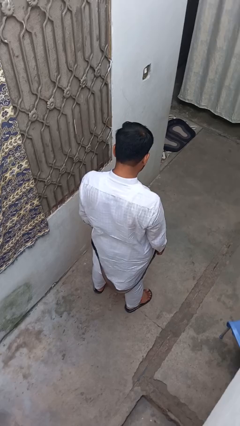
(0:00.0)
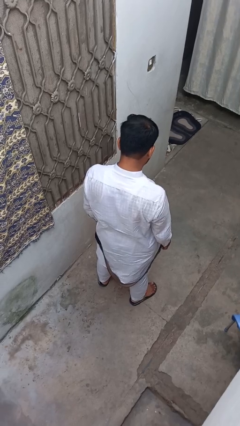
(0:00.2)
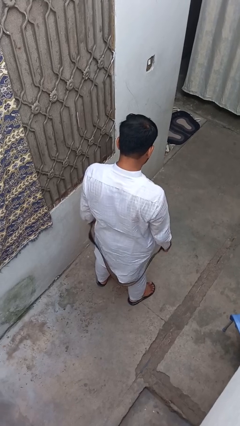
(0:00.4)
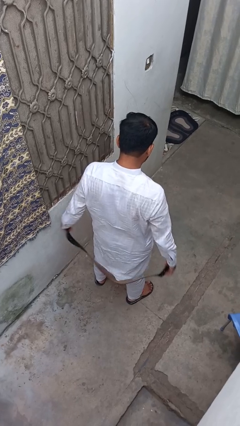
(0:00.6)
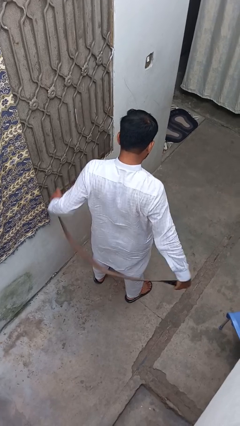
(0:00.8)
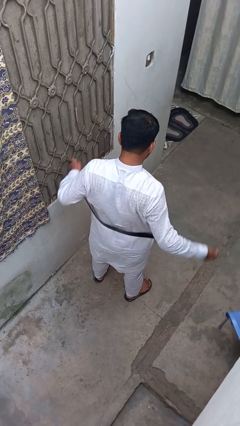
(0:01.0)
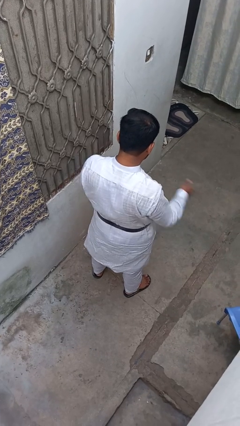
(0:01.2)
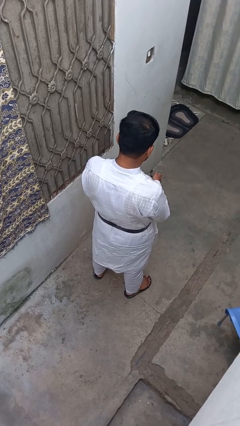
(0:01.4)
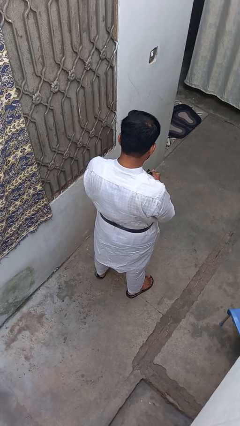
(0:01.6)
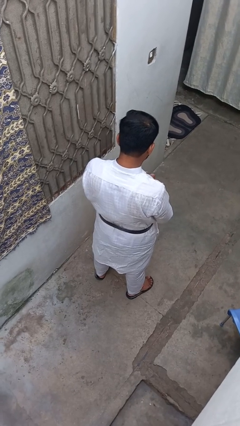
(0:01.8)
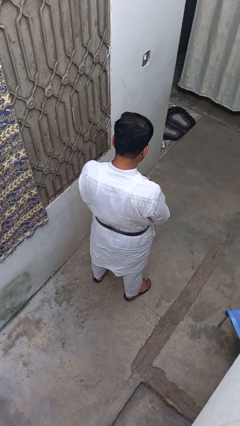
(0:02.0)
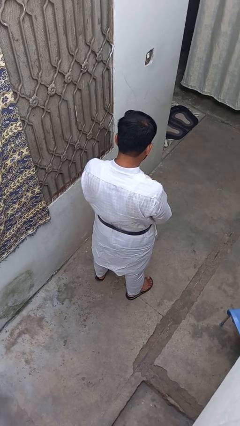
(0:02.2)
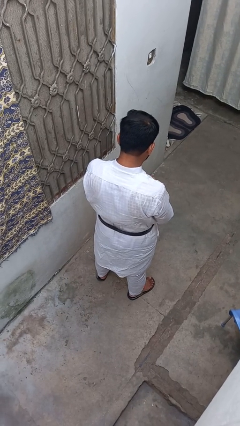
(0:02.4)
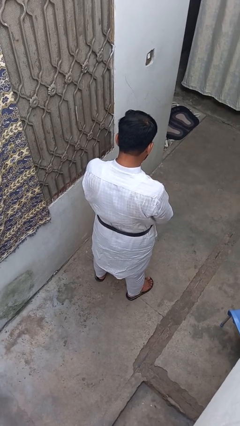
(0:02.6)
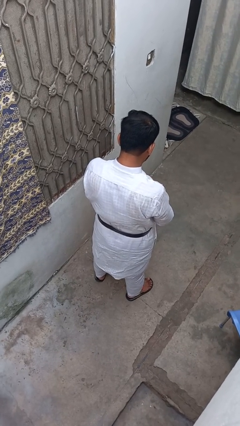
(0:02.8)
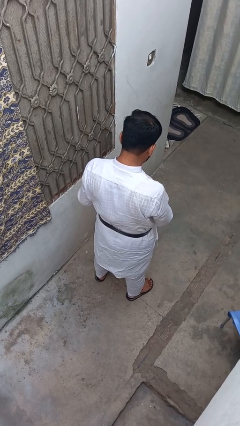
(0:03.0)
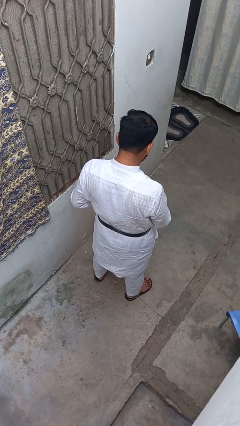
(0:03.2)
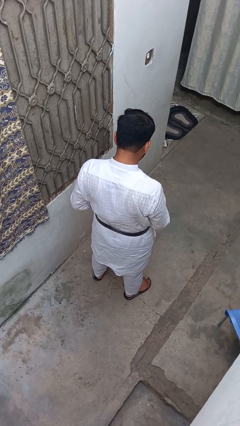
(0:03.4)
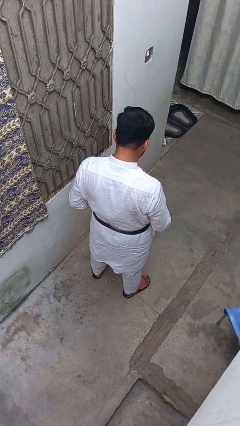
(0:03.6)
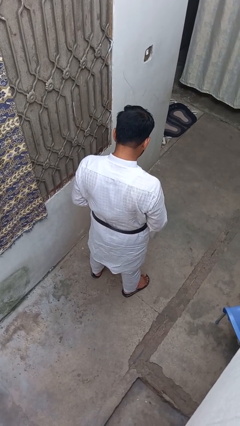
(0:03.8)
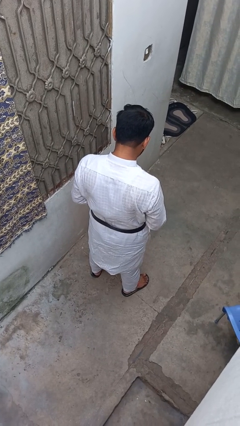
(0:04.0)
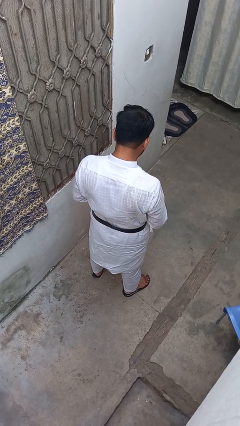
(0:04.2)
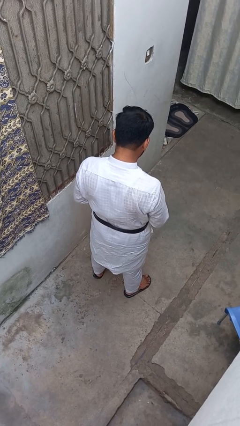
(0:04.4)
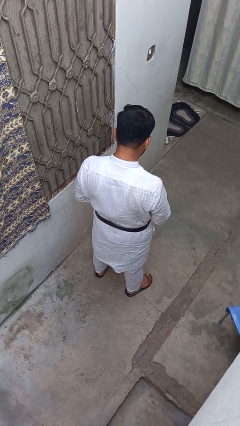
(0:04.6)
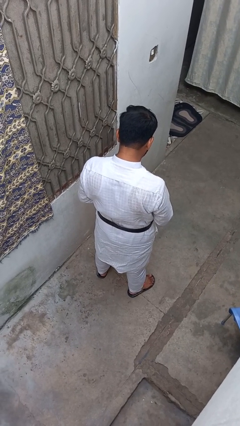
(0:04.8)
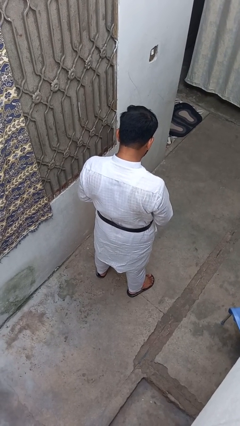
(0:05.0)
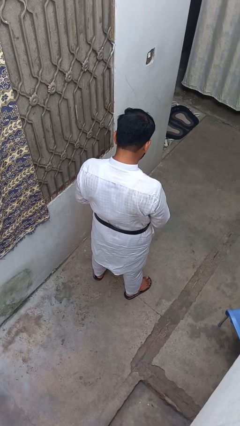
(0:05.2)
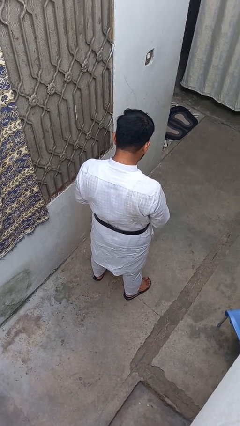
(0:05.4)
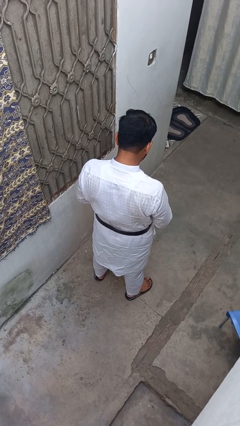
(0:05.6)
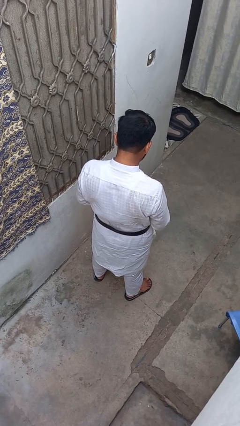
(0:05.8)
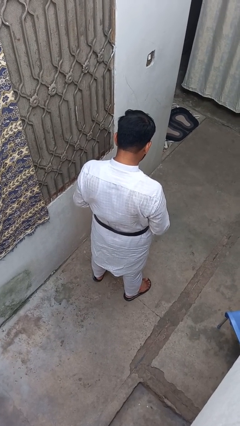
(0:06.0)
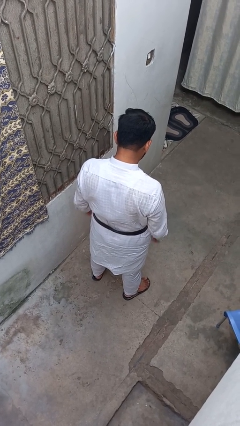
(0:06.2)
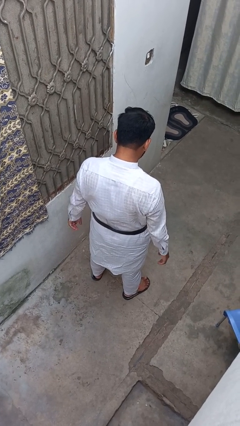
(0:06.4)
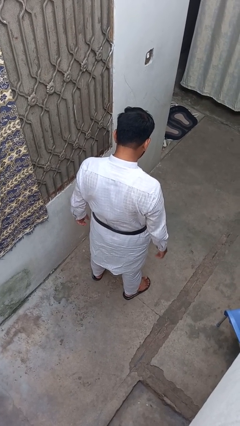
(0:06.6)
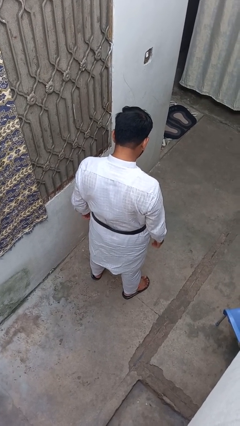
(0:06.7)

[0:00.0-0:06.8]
person puts on belt

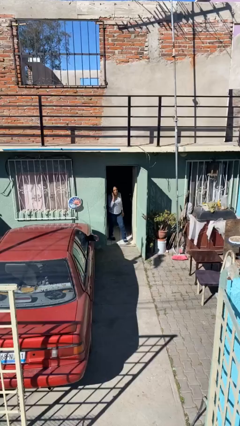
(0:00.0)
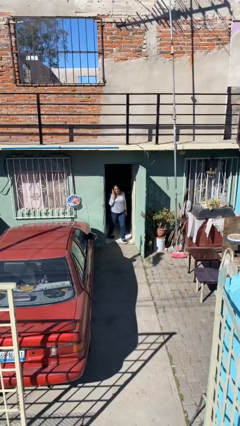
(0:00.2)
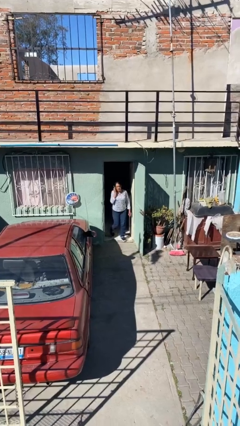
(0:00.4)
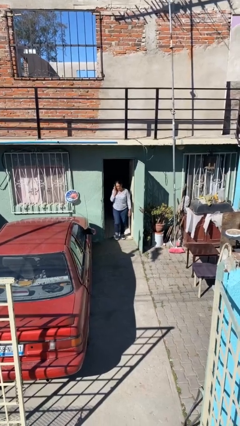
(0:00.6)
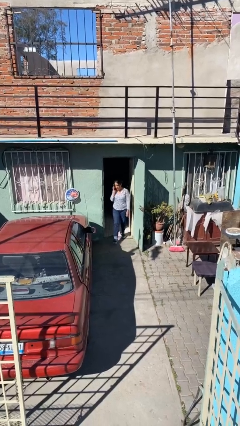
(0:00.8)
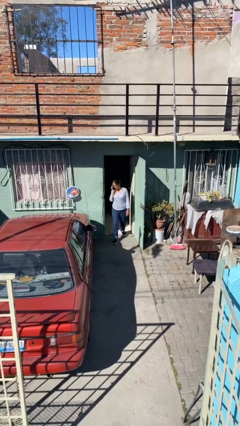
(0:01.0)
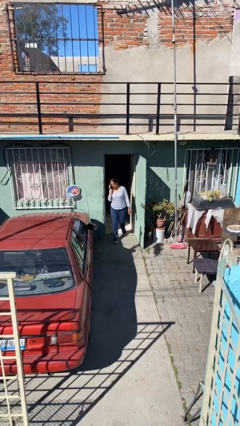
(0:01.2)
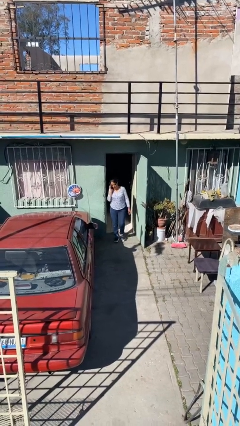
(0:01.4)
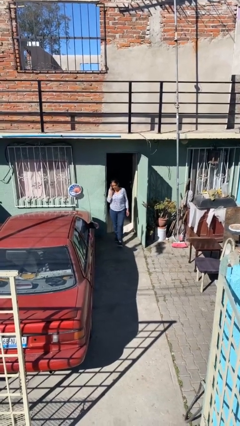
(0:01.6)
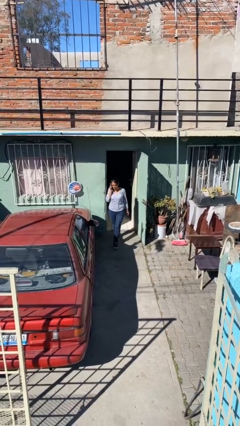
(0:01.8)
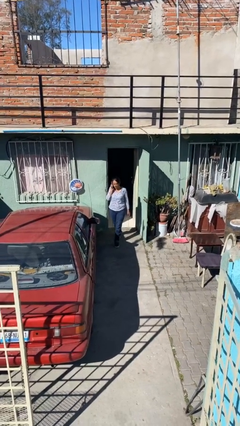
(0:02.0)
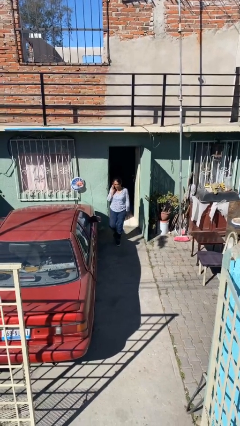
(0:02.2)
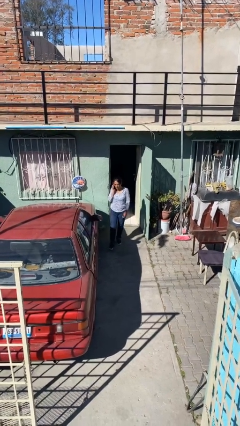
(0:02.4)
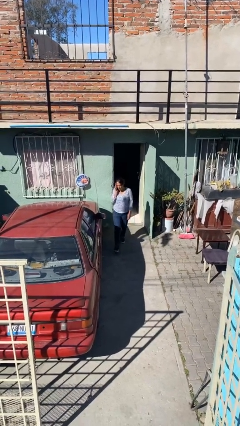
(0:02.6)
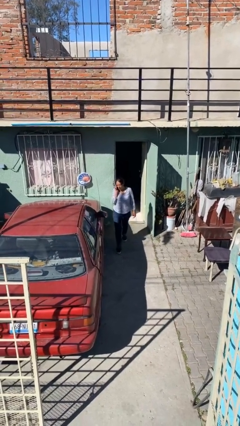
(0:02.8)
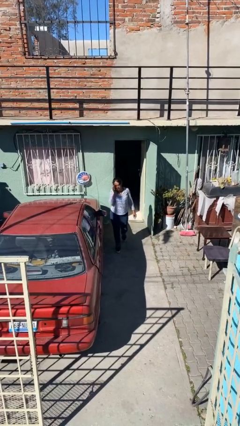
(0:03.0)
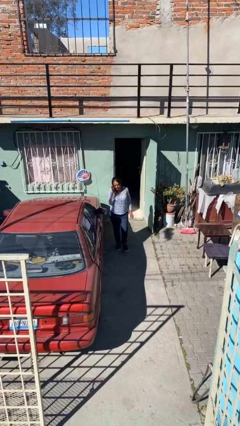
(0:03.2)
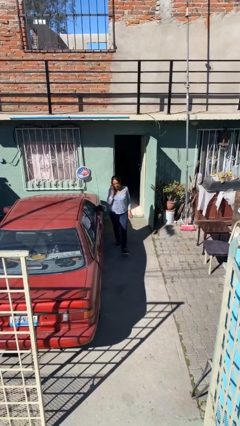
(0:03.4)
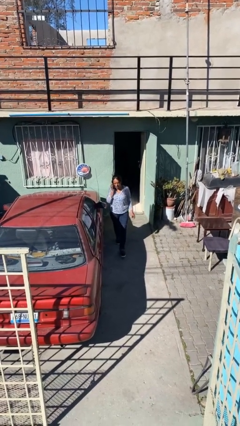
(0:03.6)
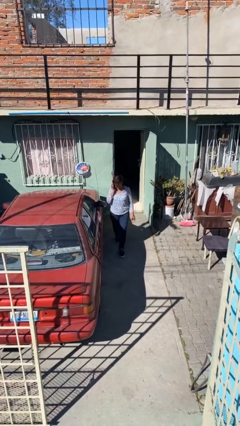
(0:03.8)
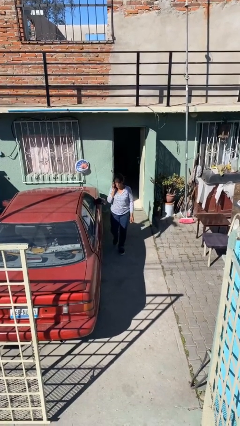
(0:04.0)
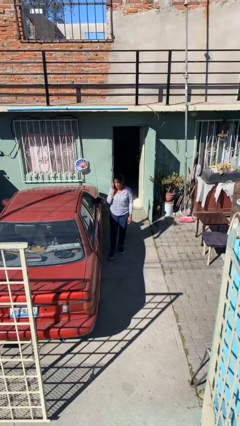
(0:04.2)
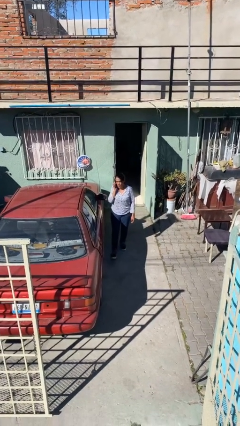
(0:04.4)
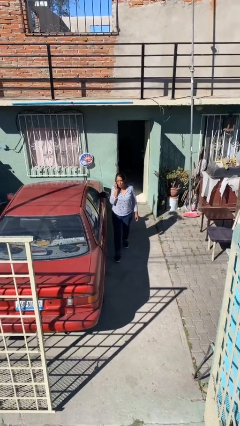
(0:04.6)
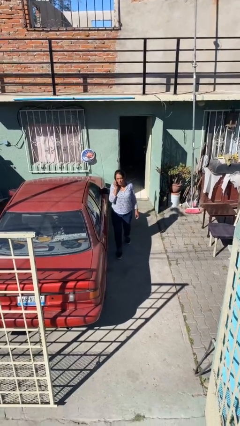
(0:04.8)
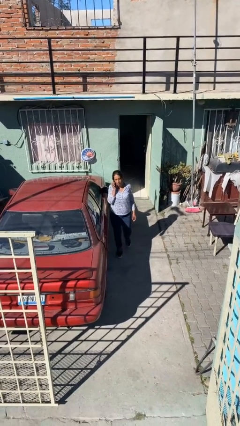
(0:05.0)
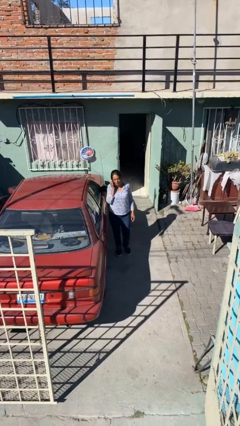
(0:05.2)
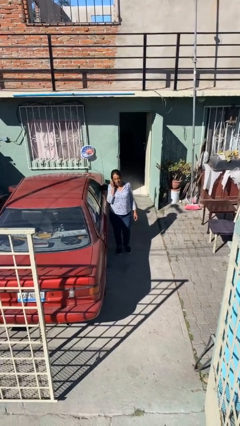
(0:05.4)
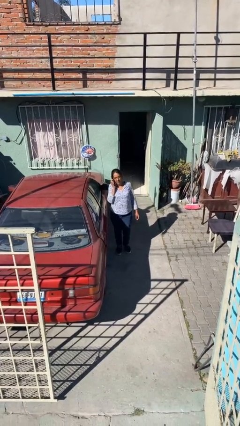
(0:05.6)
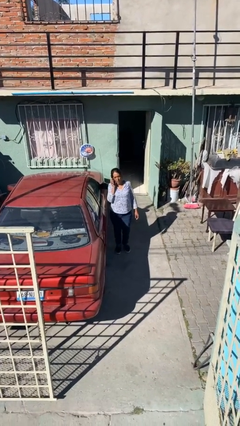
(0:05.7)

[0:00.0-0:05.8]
person enters scene through structure

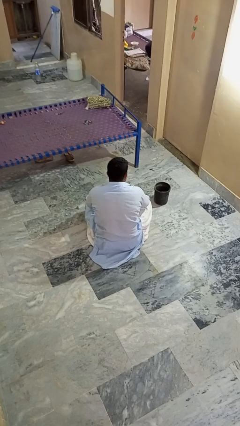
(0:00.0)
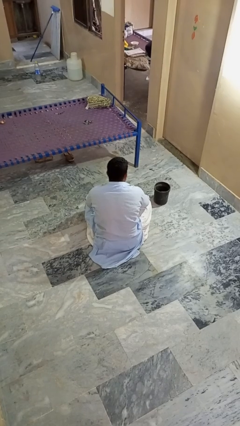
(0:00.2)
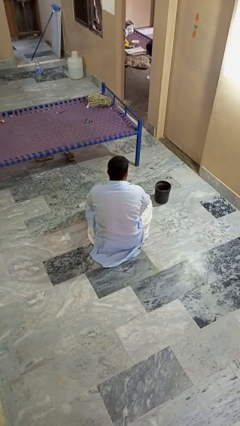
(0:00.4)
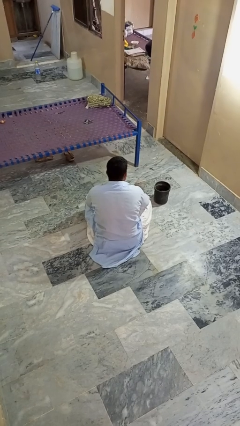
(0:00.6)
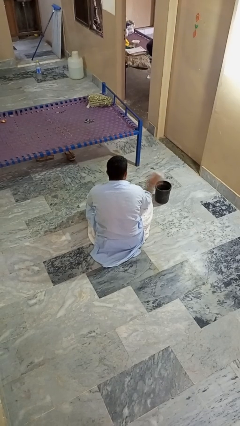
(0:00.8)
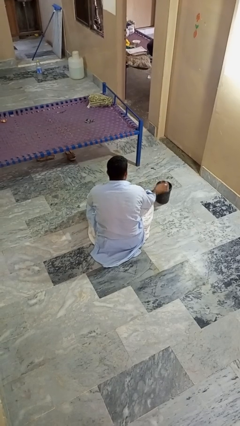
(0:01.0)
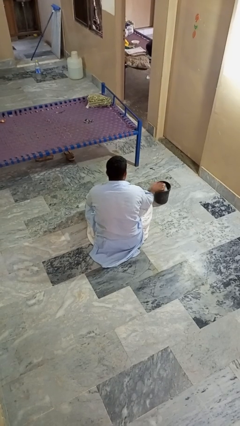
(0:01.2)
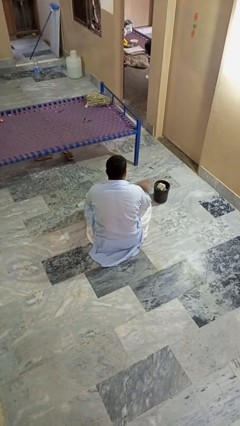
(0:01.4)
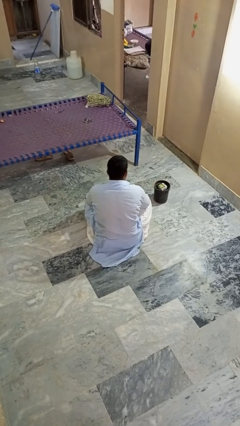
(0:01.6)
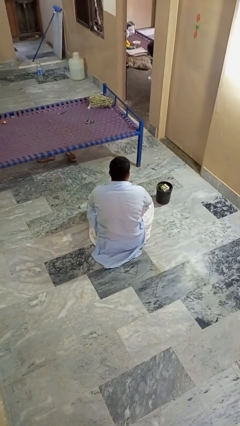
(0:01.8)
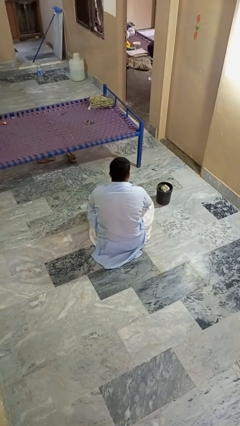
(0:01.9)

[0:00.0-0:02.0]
person puts object into basket

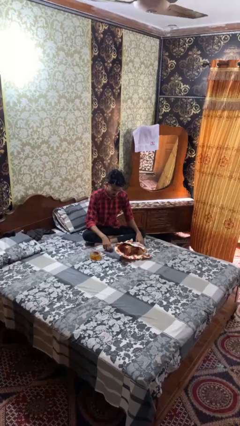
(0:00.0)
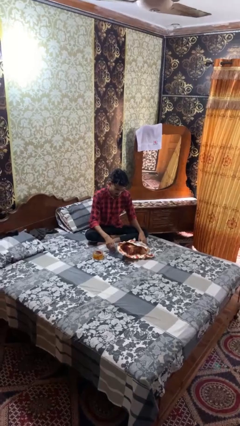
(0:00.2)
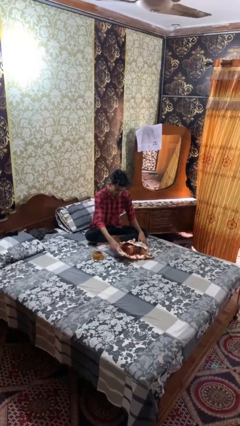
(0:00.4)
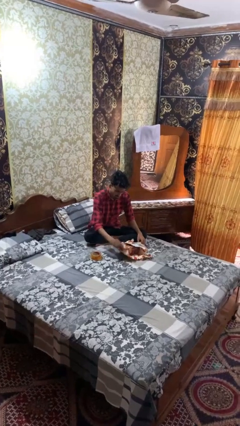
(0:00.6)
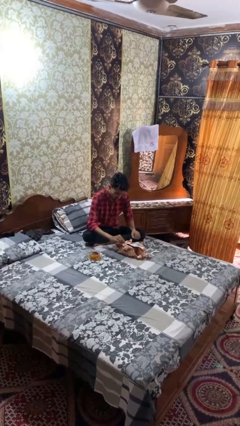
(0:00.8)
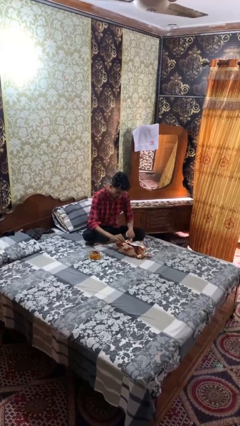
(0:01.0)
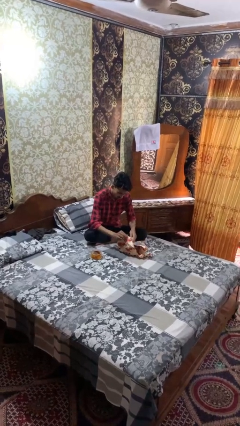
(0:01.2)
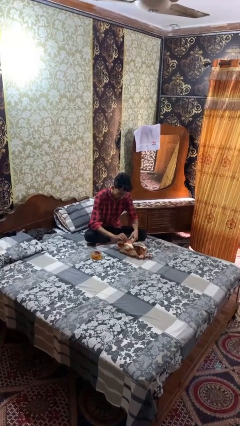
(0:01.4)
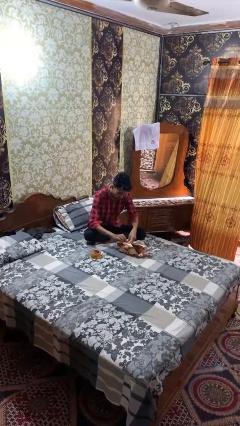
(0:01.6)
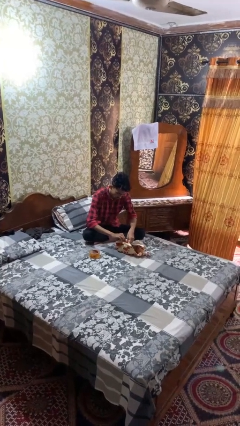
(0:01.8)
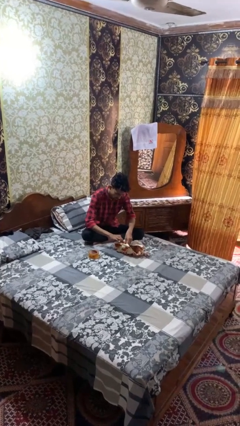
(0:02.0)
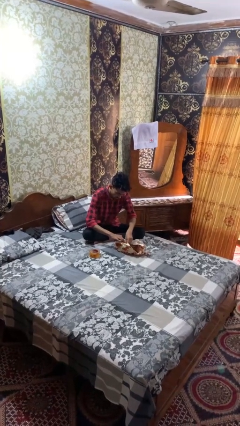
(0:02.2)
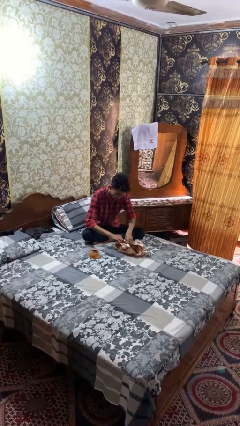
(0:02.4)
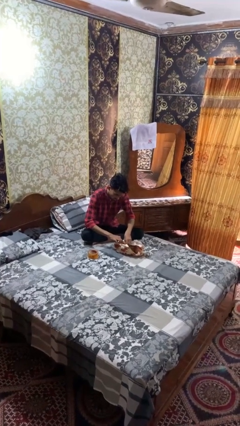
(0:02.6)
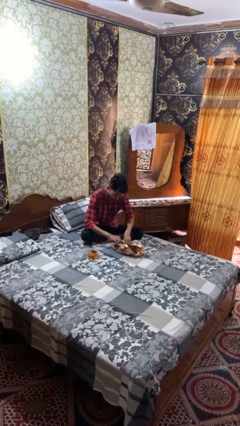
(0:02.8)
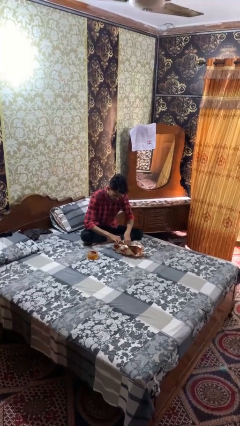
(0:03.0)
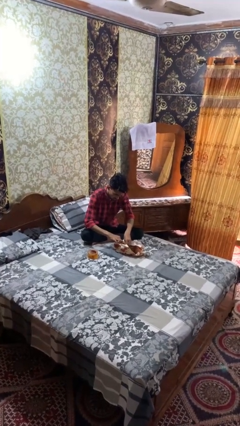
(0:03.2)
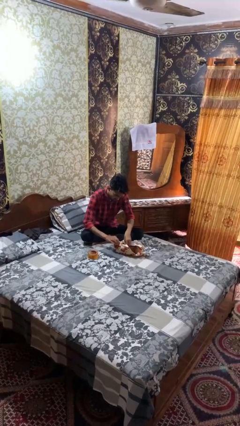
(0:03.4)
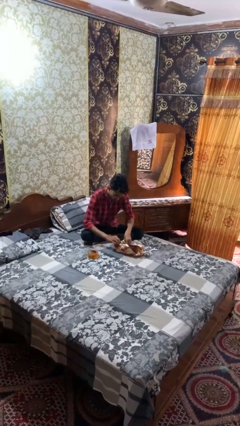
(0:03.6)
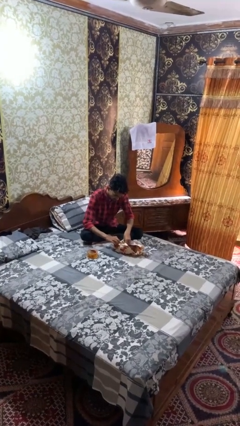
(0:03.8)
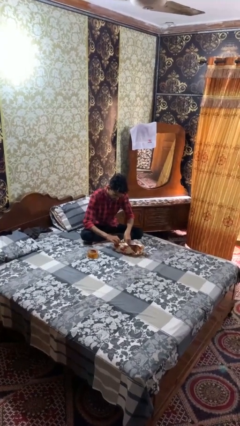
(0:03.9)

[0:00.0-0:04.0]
person wraps box
